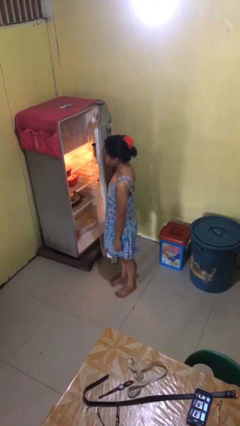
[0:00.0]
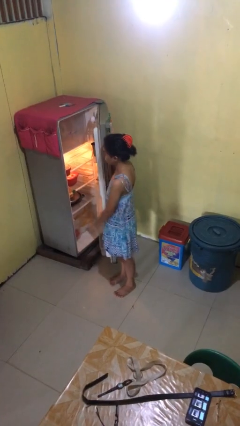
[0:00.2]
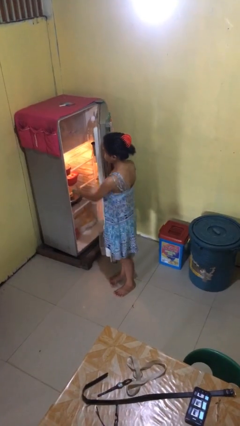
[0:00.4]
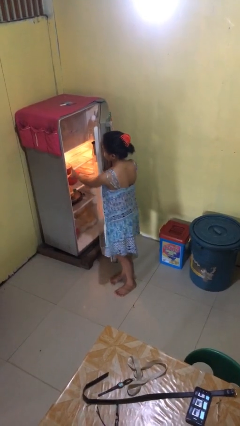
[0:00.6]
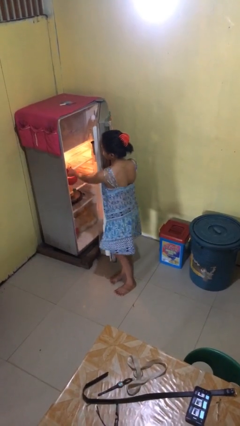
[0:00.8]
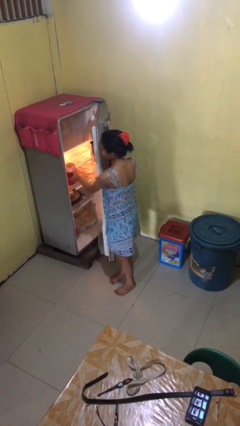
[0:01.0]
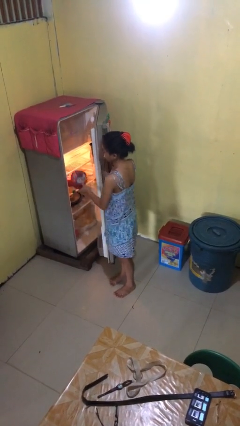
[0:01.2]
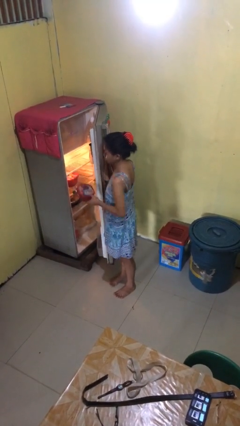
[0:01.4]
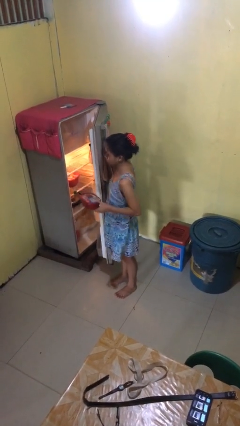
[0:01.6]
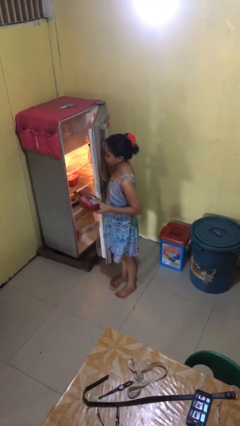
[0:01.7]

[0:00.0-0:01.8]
person takes object from refrigerator

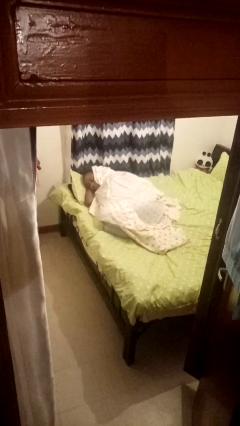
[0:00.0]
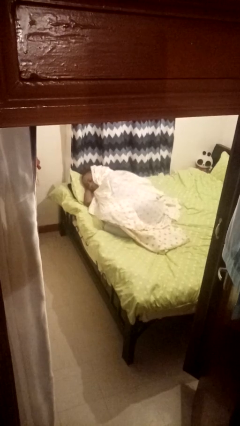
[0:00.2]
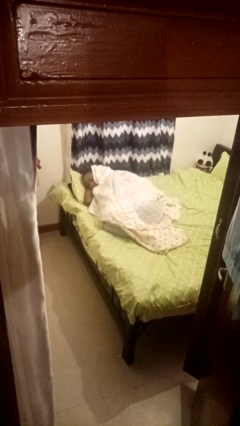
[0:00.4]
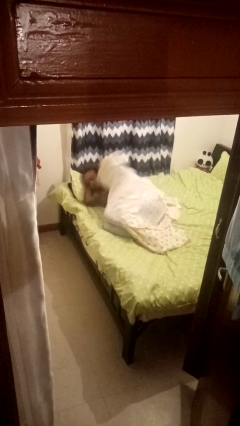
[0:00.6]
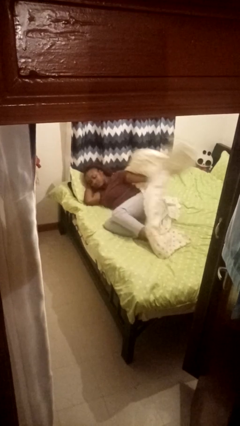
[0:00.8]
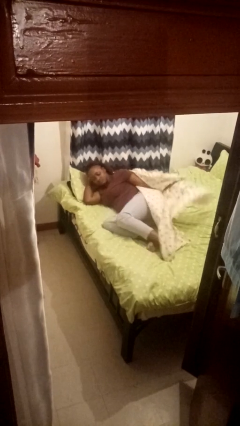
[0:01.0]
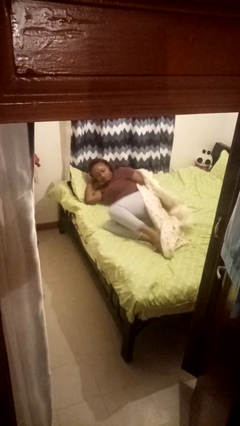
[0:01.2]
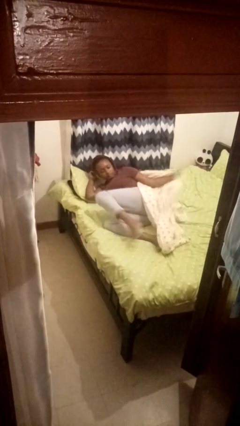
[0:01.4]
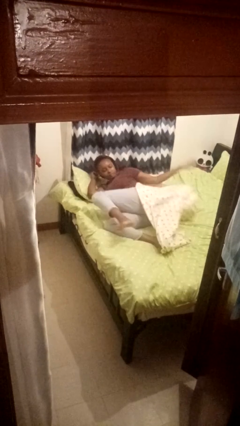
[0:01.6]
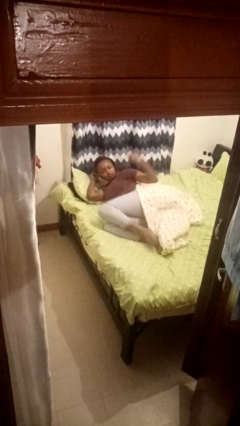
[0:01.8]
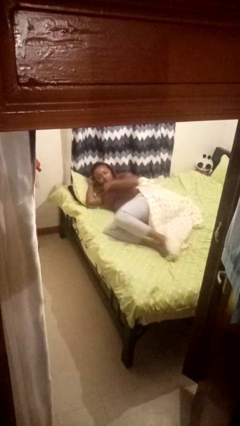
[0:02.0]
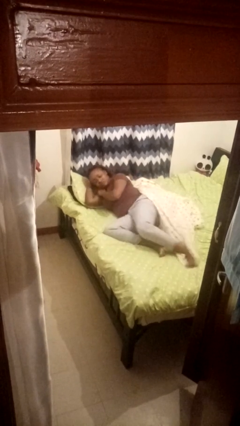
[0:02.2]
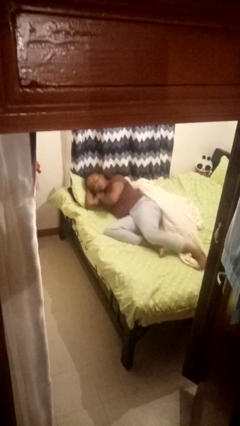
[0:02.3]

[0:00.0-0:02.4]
person uncovers with bedsheets

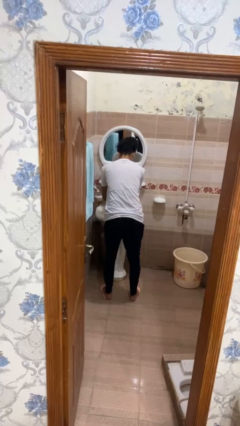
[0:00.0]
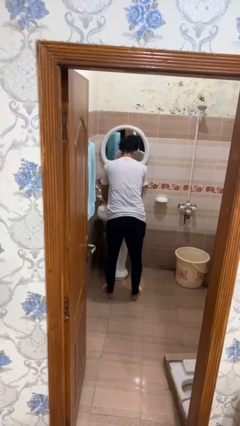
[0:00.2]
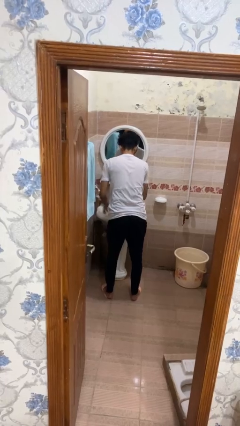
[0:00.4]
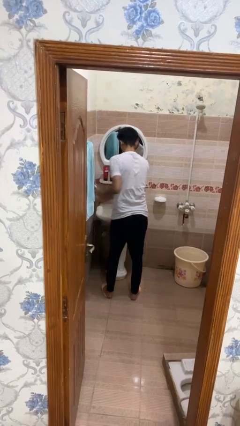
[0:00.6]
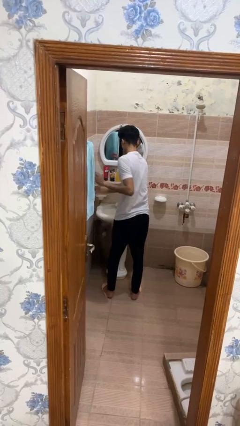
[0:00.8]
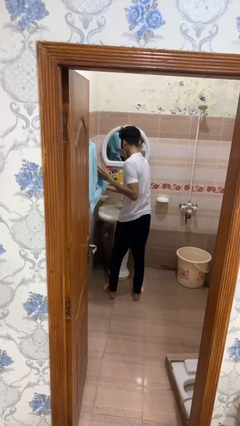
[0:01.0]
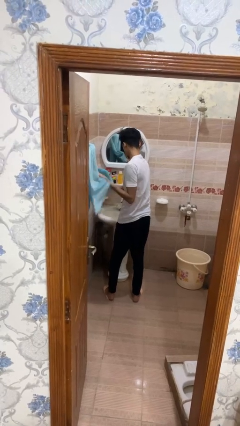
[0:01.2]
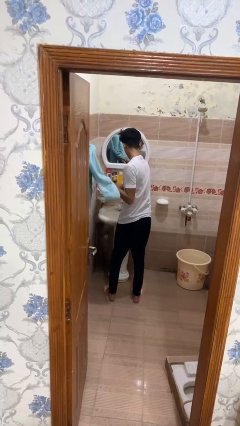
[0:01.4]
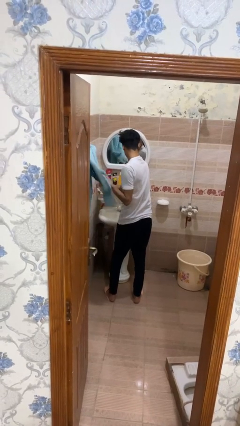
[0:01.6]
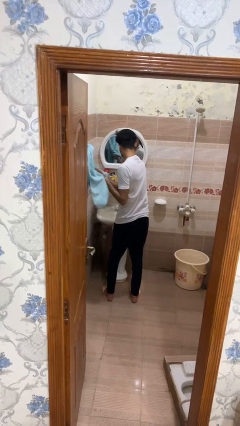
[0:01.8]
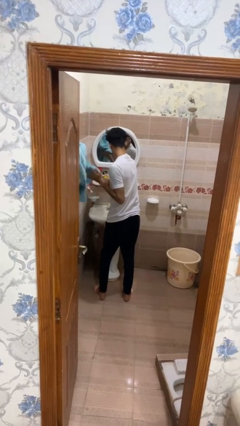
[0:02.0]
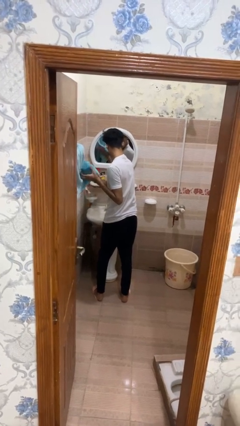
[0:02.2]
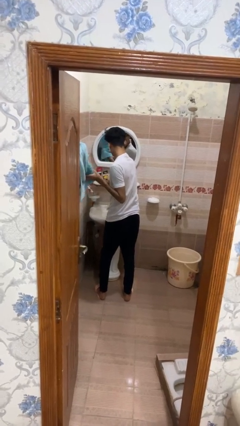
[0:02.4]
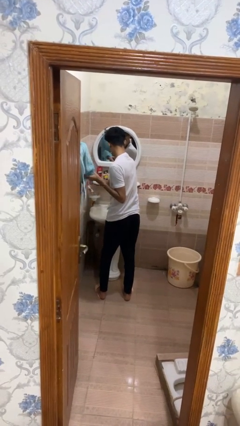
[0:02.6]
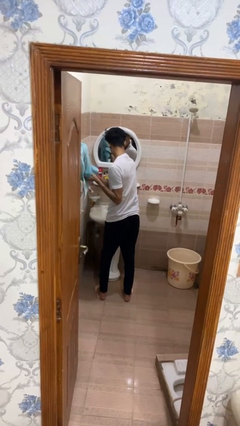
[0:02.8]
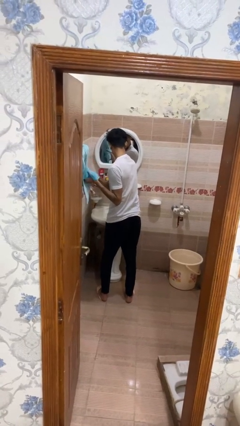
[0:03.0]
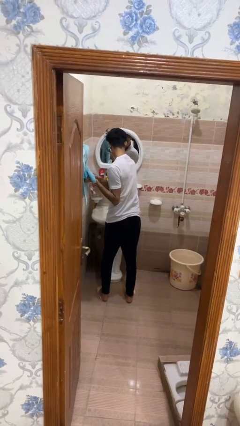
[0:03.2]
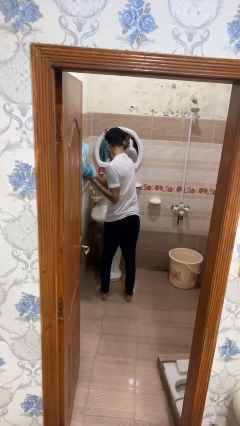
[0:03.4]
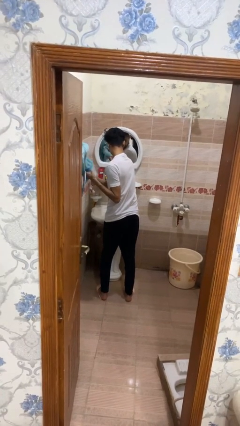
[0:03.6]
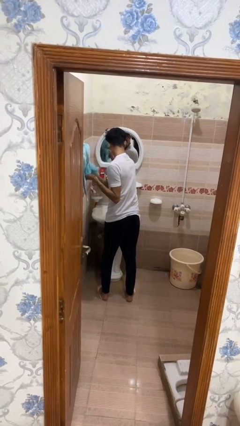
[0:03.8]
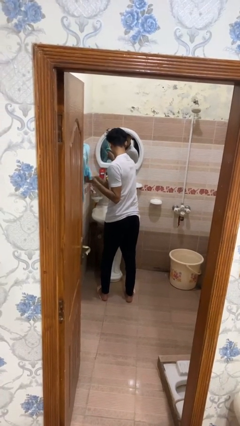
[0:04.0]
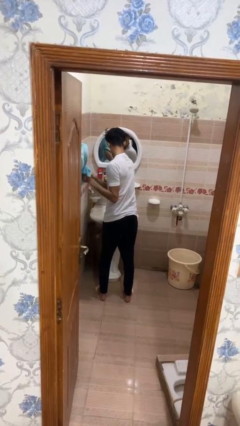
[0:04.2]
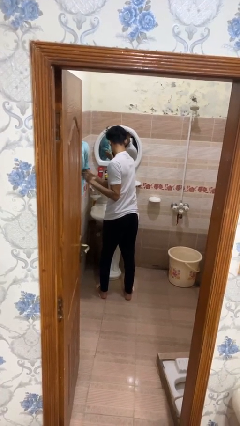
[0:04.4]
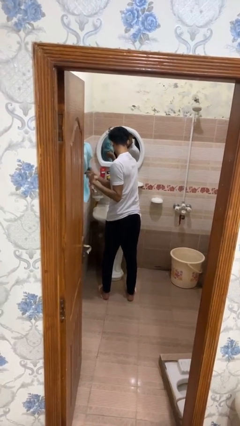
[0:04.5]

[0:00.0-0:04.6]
person dries hands with towel

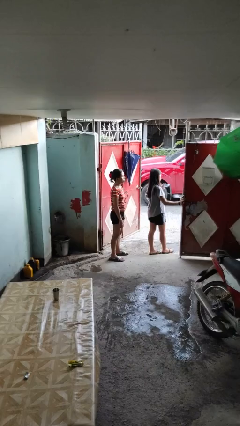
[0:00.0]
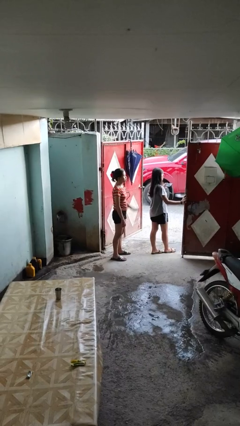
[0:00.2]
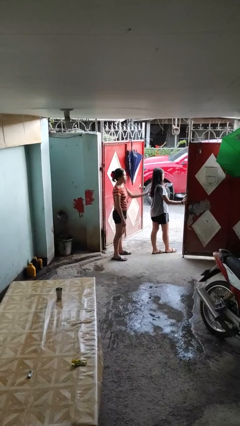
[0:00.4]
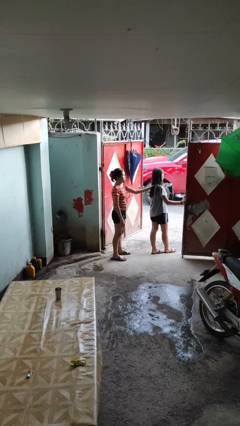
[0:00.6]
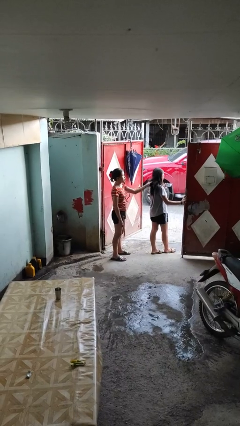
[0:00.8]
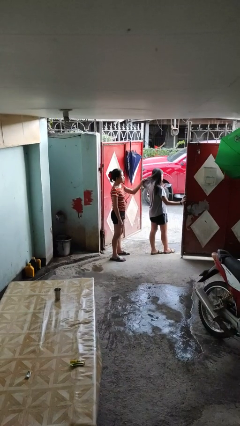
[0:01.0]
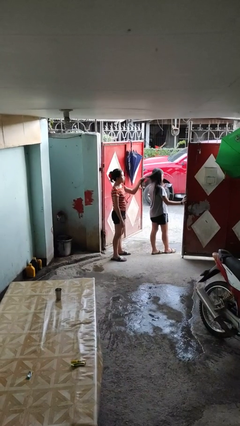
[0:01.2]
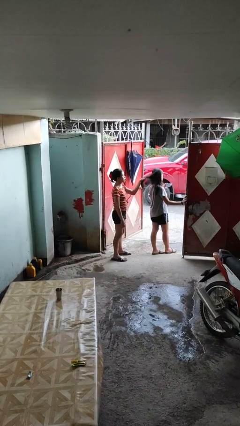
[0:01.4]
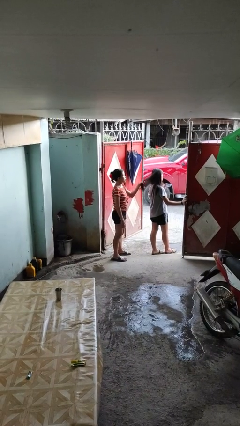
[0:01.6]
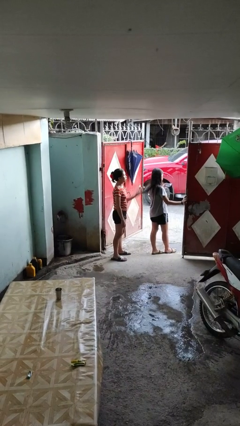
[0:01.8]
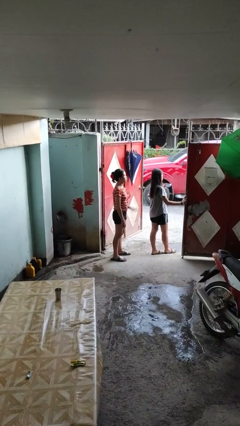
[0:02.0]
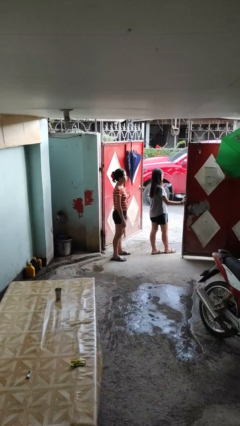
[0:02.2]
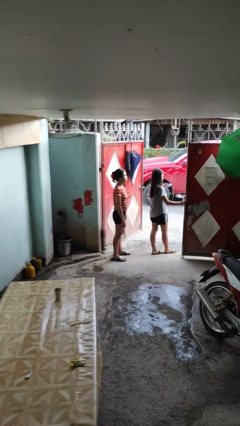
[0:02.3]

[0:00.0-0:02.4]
person grabs person by hair

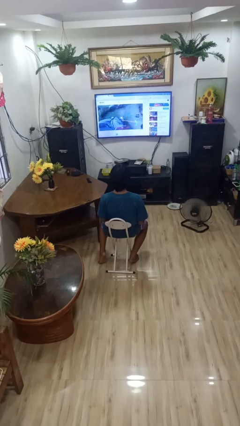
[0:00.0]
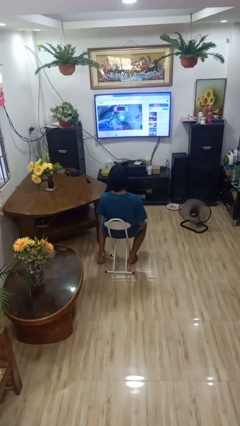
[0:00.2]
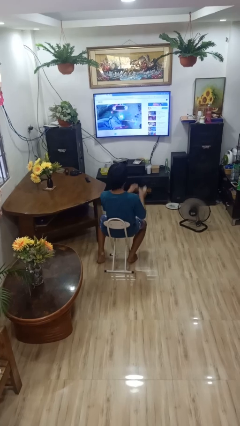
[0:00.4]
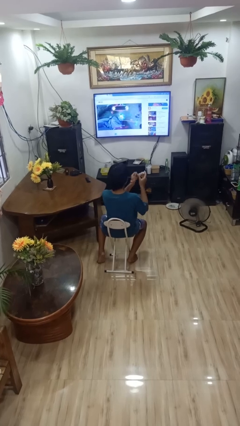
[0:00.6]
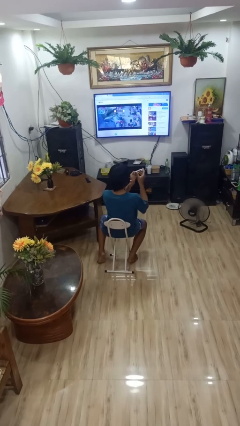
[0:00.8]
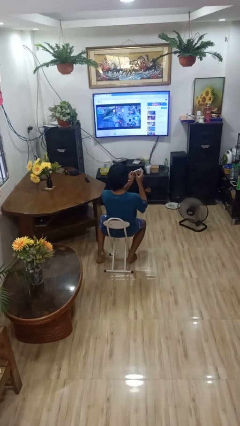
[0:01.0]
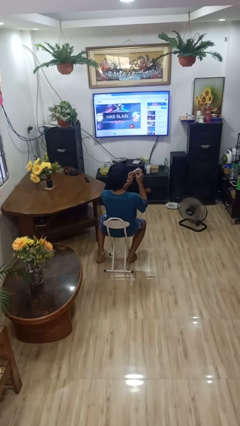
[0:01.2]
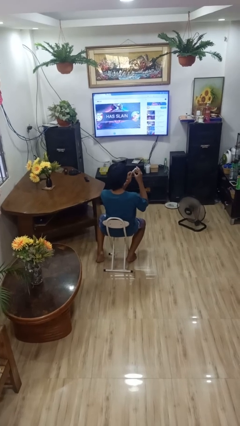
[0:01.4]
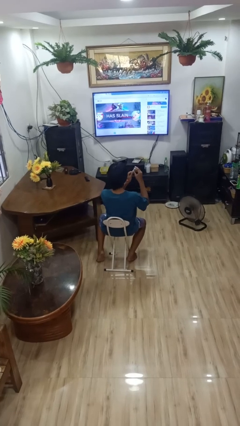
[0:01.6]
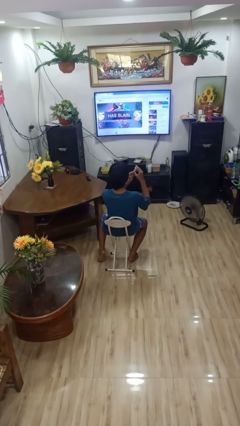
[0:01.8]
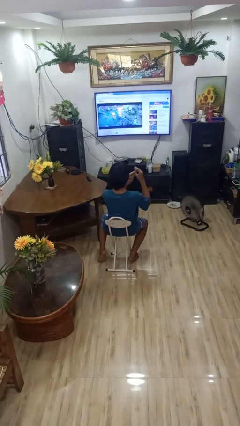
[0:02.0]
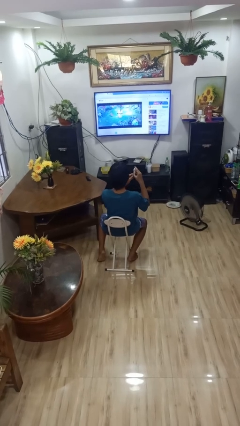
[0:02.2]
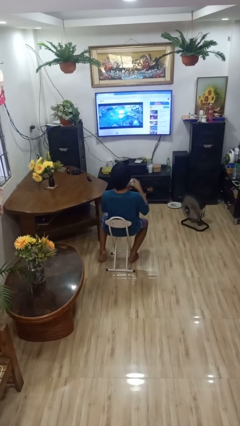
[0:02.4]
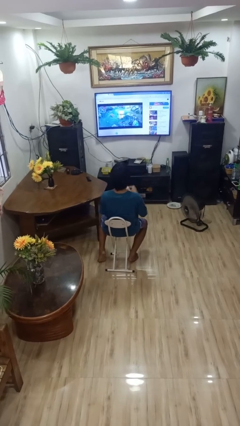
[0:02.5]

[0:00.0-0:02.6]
person clips fingernails

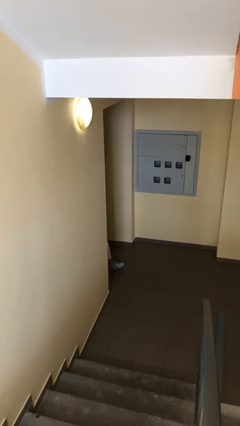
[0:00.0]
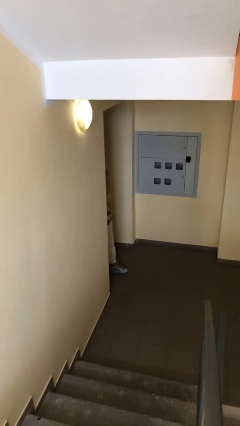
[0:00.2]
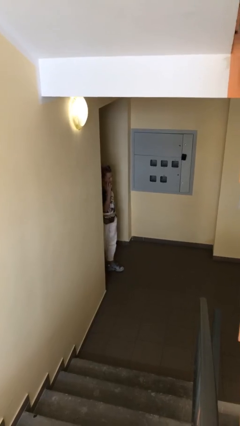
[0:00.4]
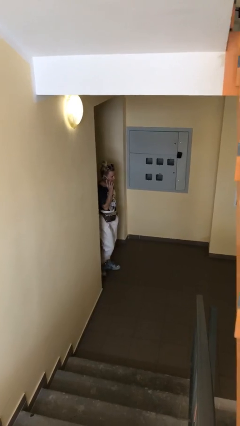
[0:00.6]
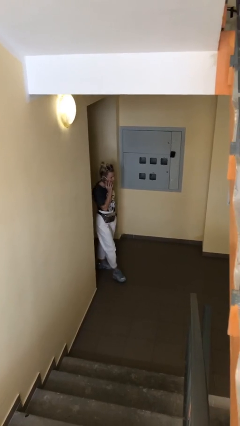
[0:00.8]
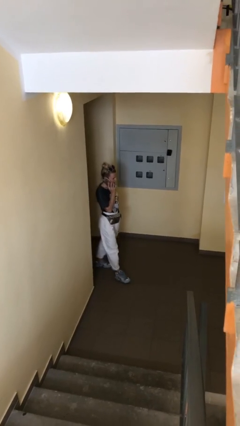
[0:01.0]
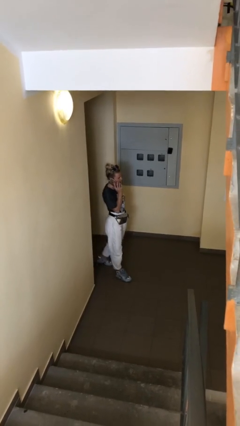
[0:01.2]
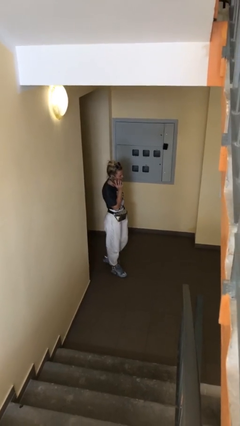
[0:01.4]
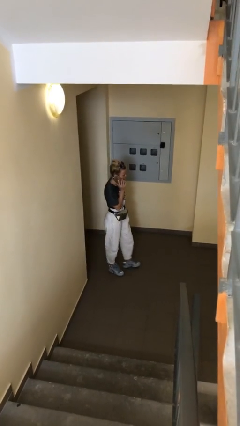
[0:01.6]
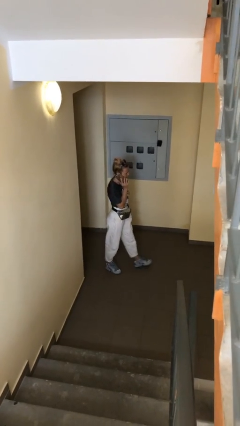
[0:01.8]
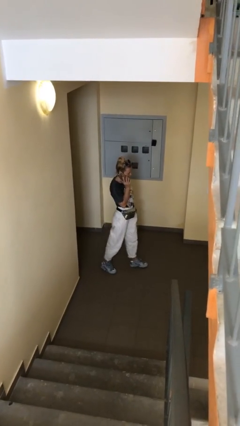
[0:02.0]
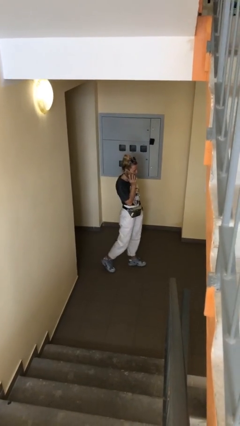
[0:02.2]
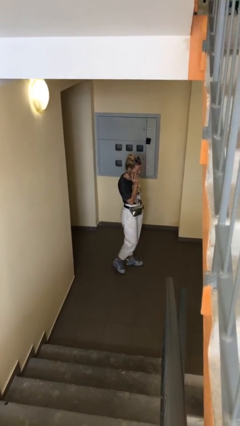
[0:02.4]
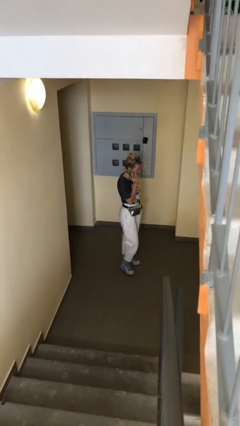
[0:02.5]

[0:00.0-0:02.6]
person enters scene through structure

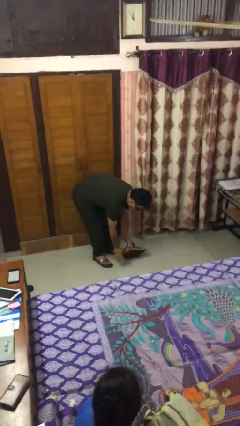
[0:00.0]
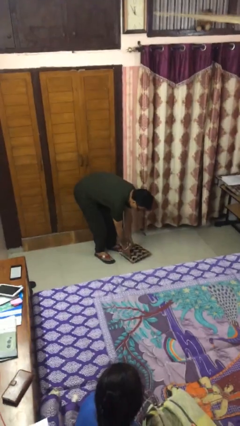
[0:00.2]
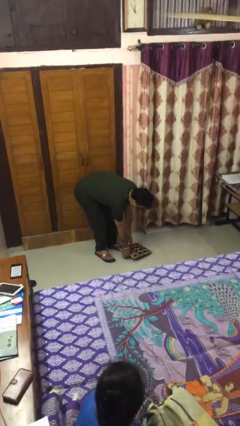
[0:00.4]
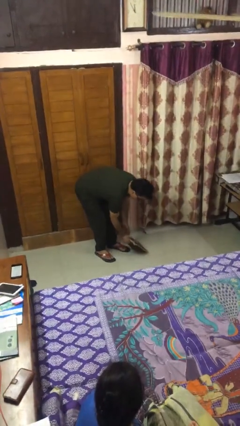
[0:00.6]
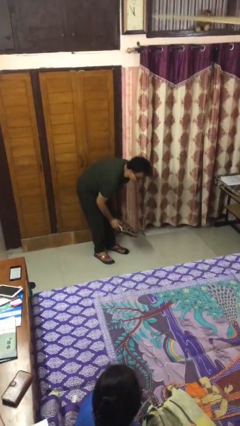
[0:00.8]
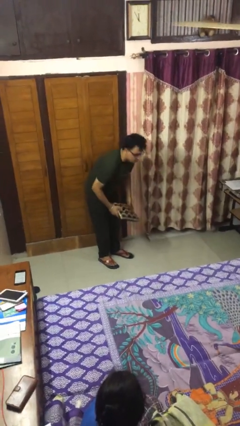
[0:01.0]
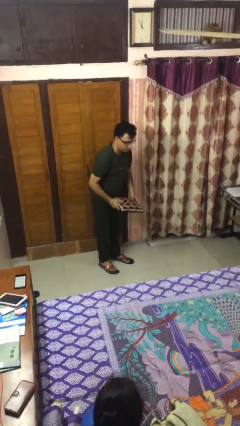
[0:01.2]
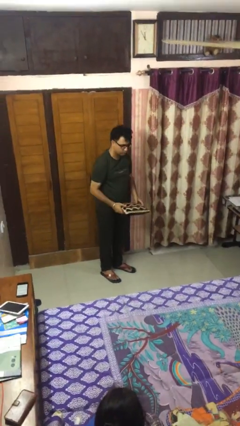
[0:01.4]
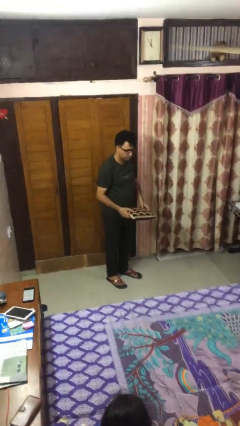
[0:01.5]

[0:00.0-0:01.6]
person picks up object from floor
